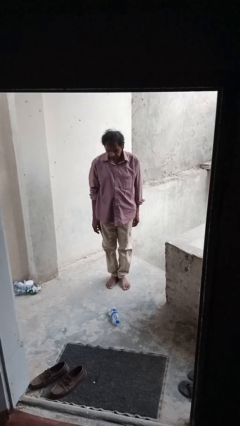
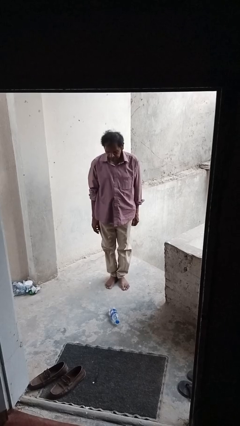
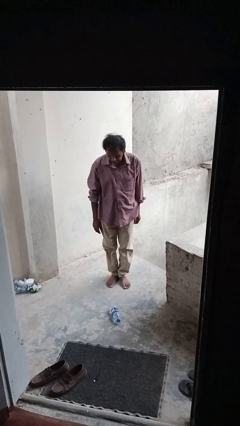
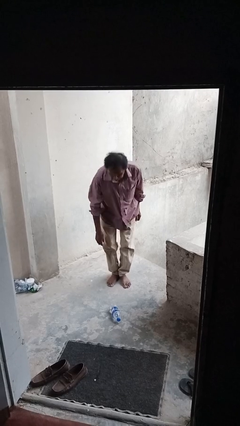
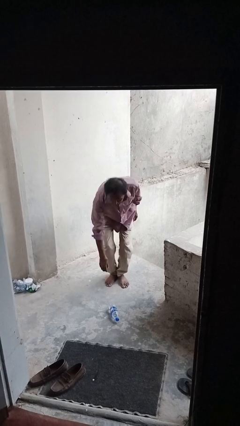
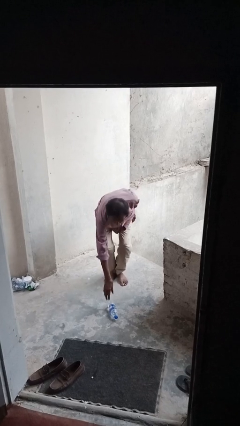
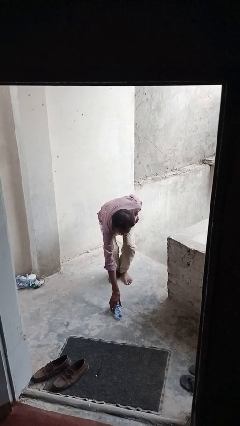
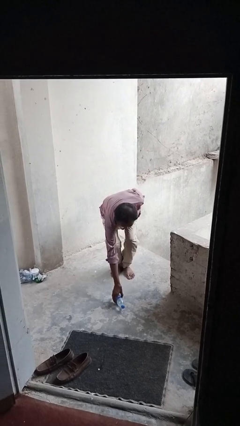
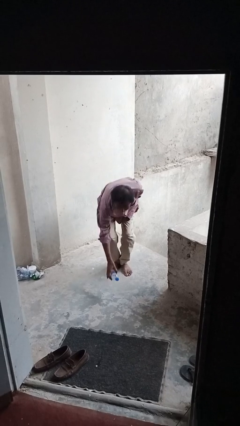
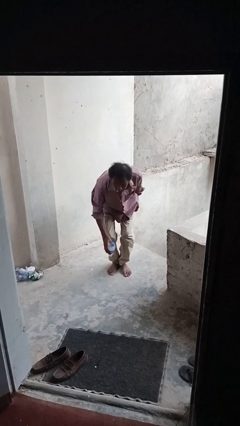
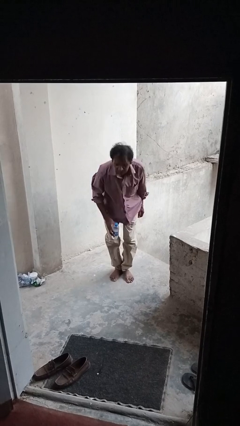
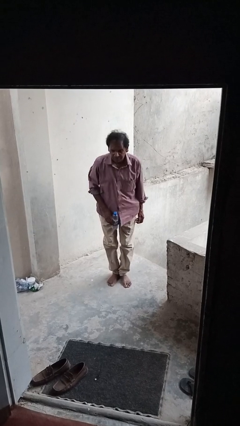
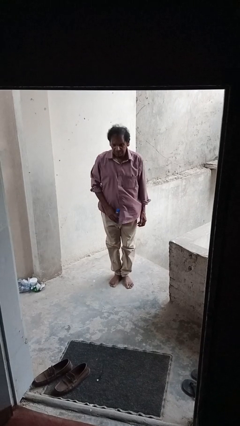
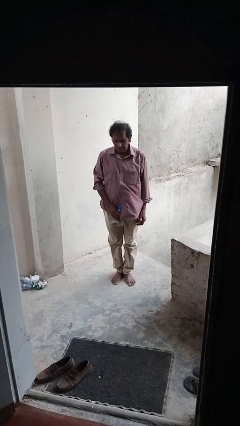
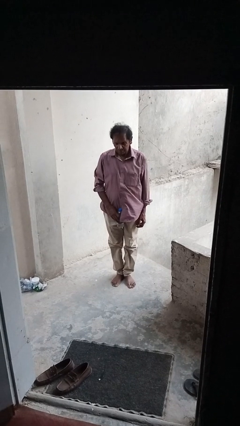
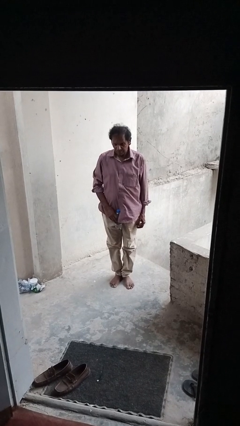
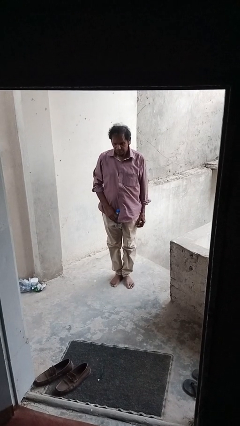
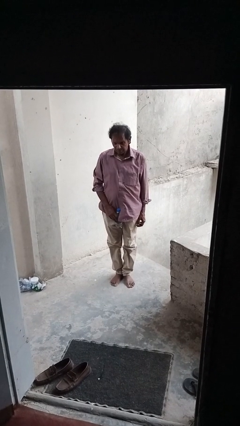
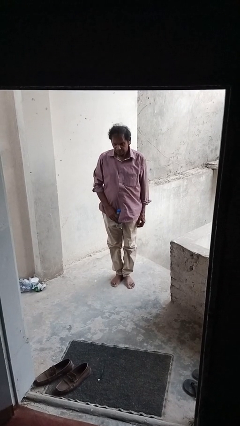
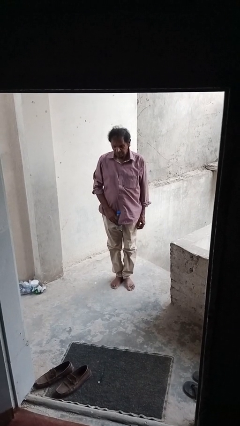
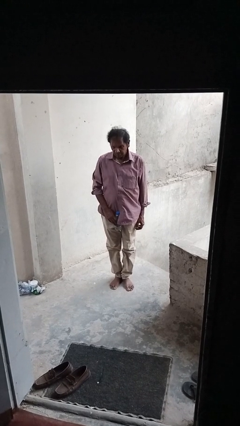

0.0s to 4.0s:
person picks up object from floor

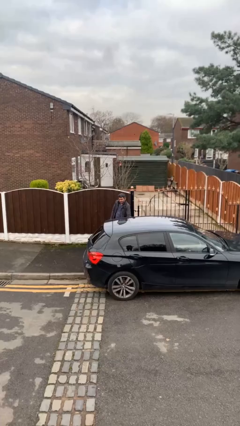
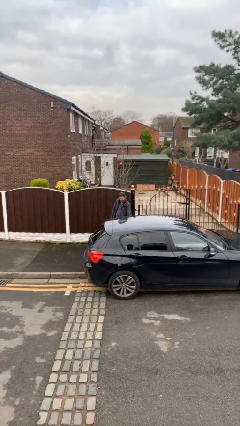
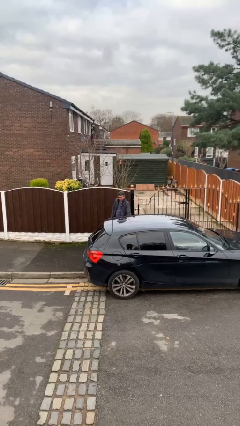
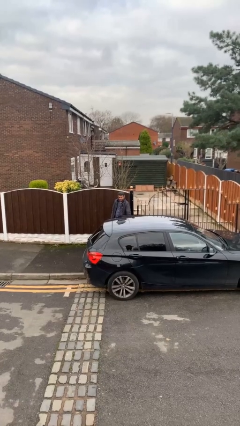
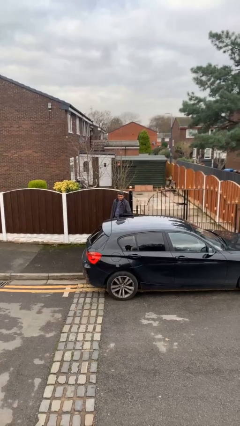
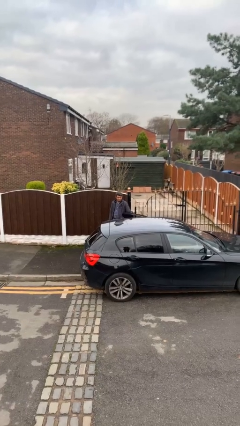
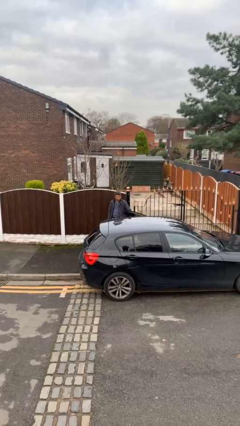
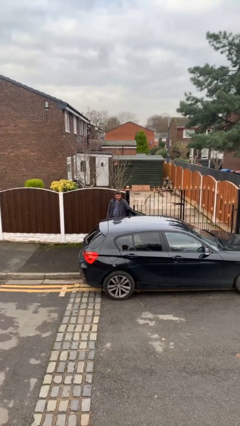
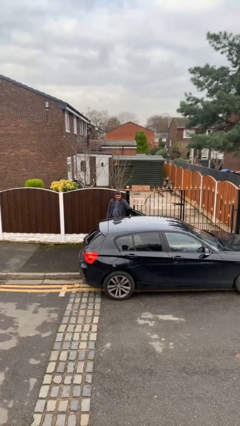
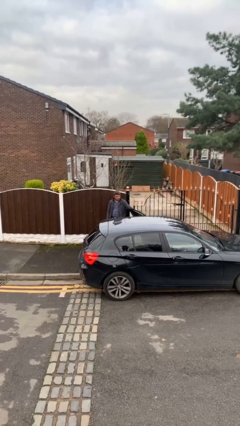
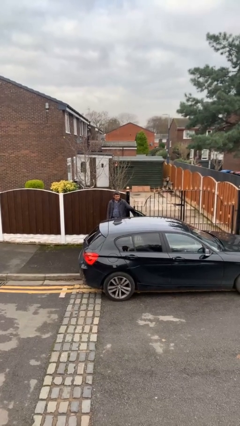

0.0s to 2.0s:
person opens car door

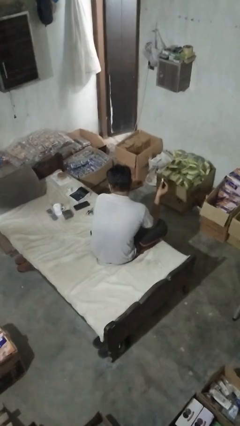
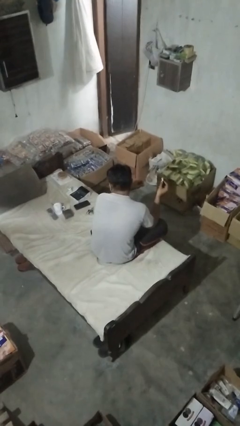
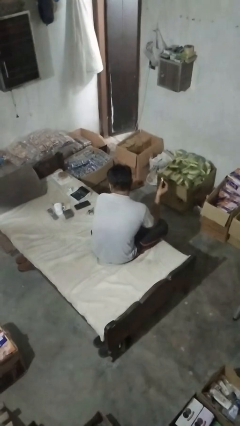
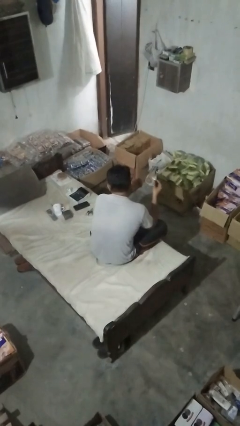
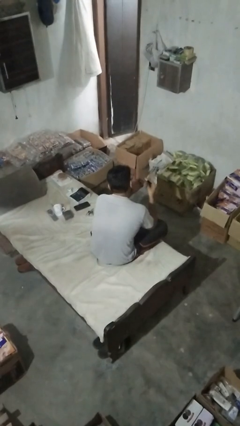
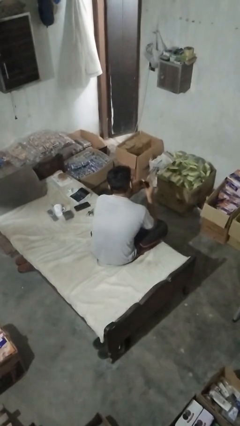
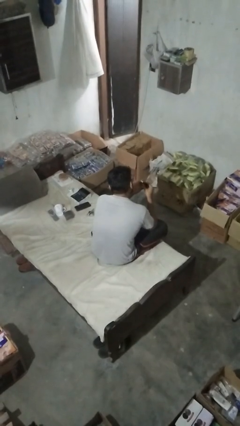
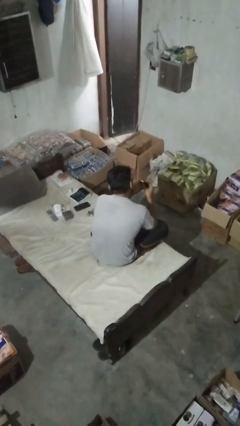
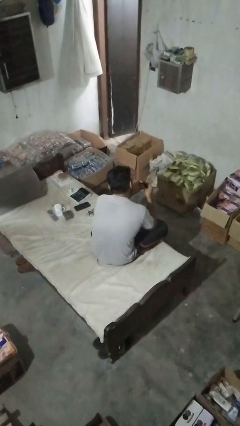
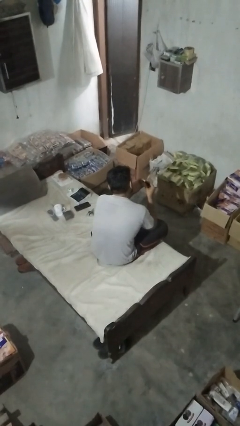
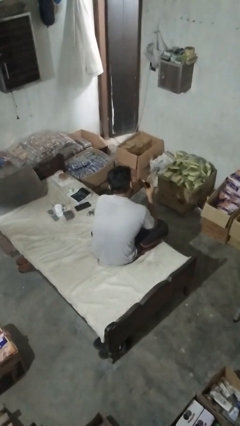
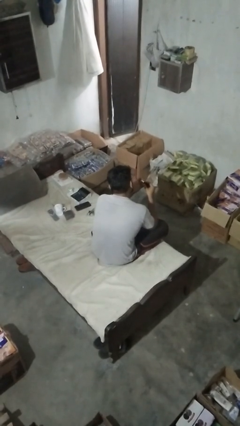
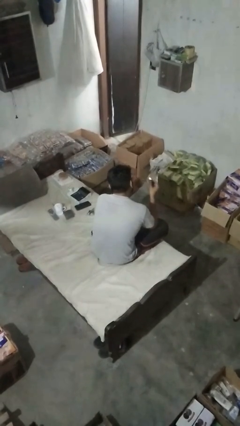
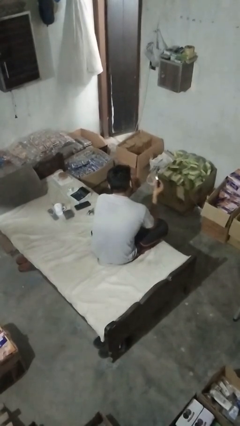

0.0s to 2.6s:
person paints fingernails

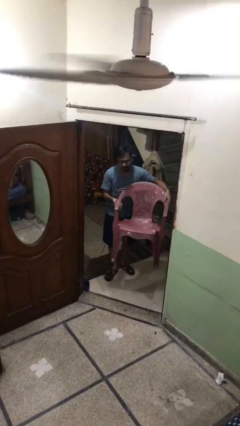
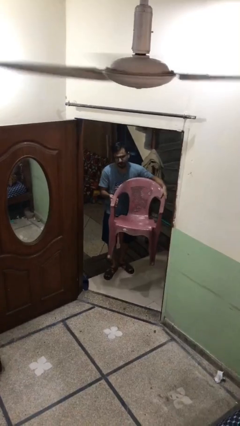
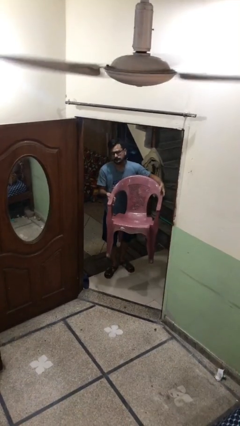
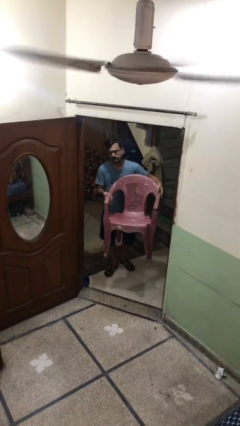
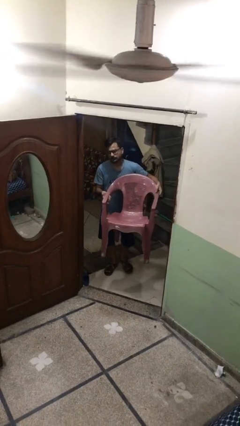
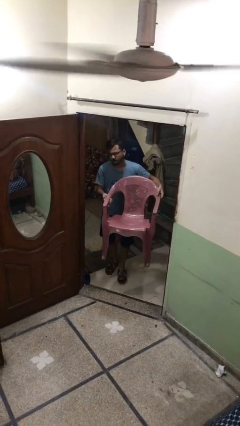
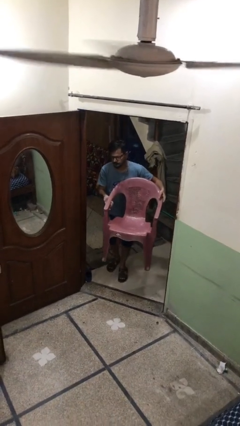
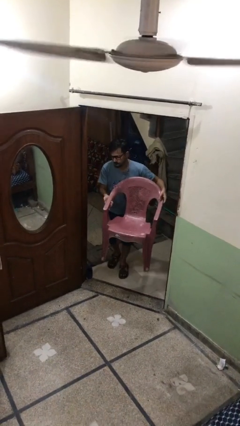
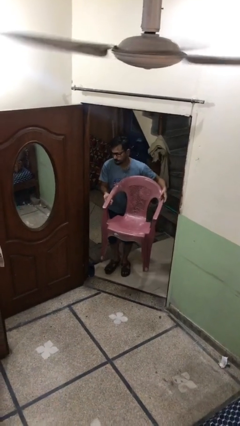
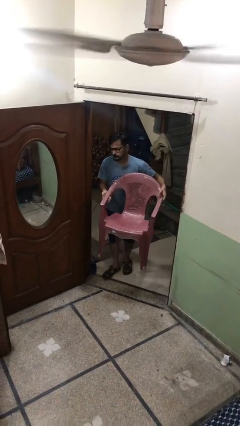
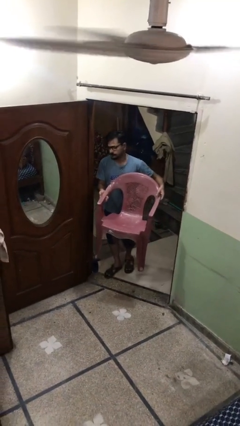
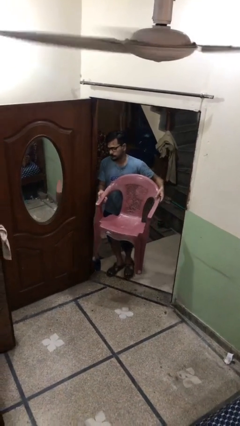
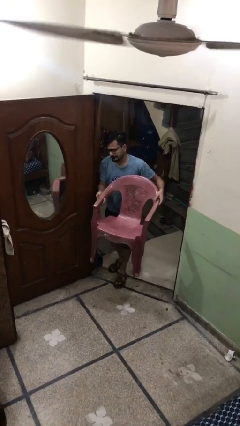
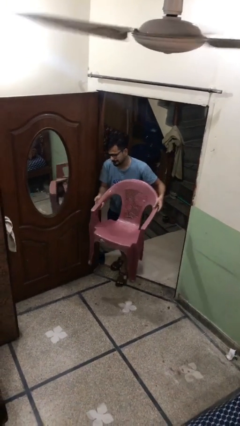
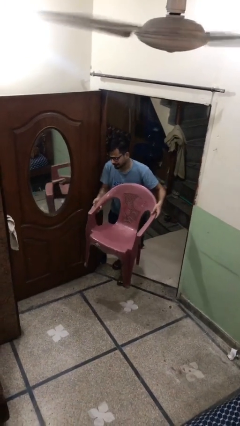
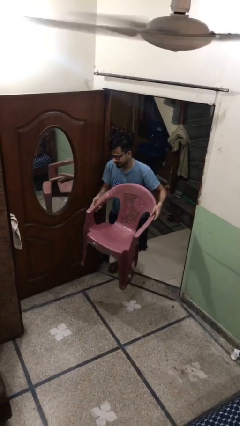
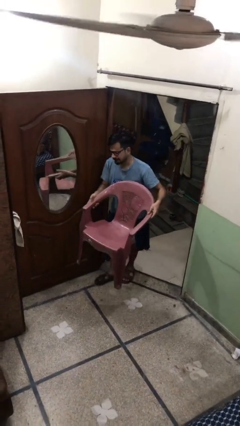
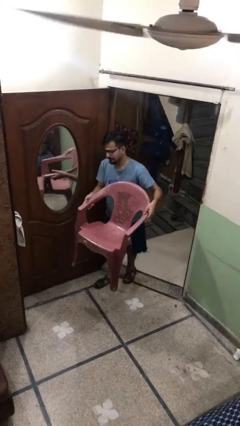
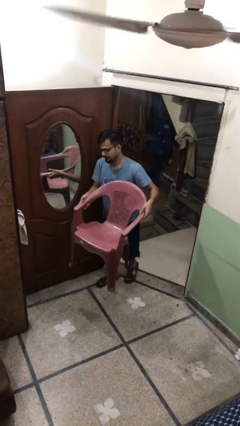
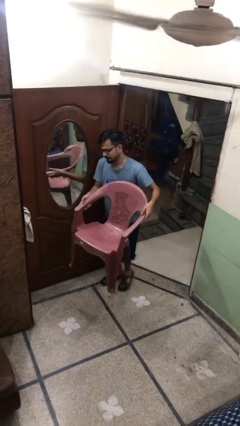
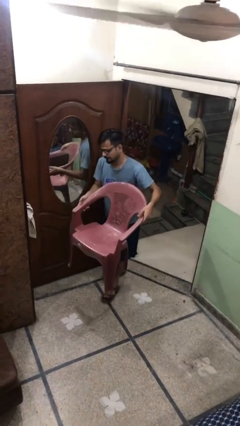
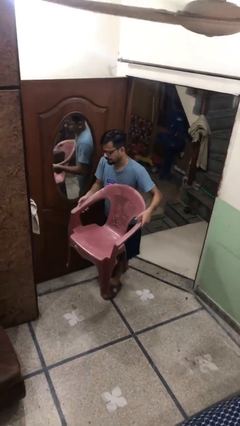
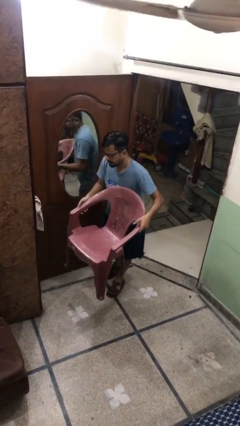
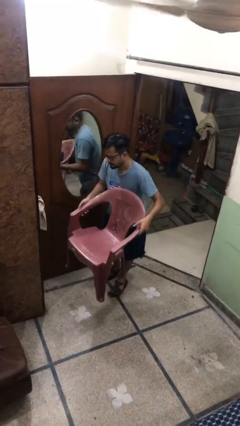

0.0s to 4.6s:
person carries heavy object

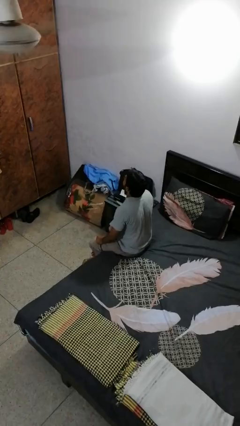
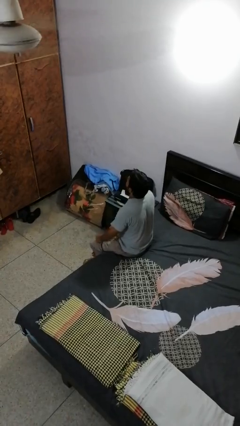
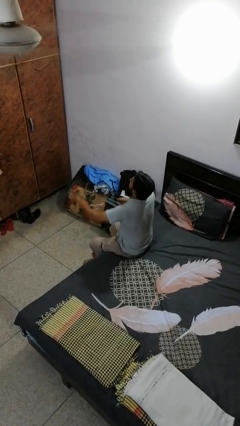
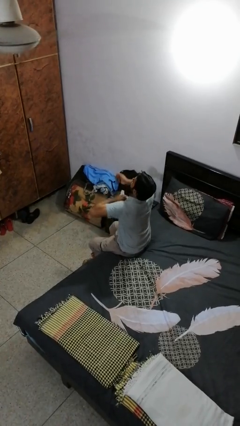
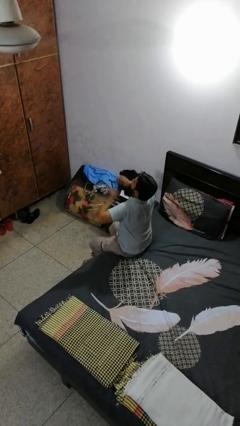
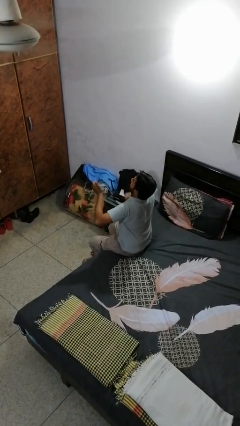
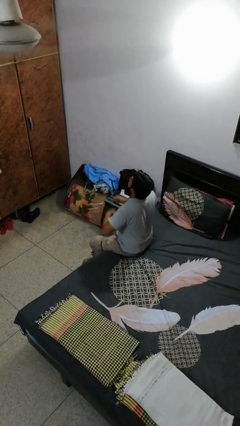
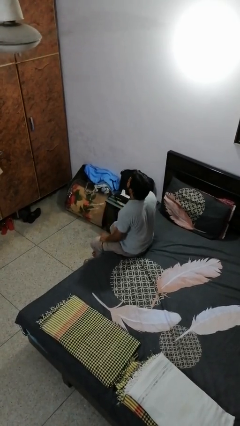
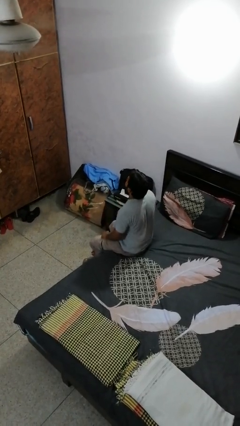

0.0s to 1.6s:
person drums on chest

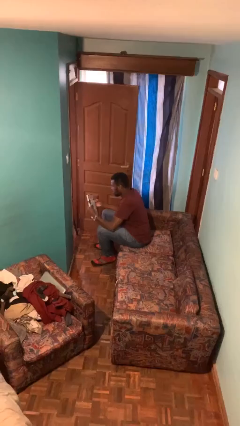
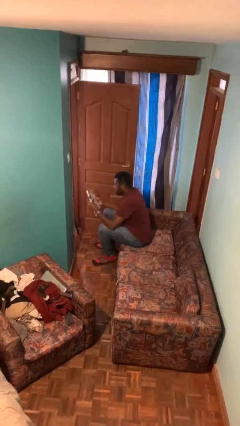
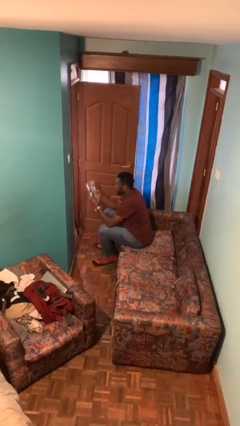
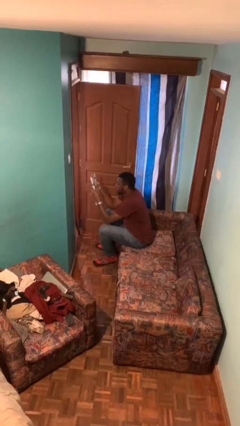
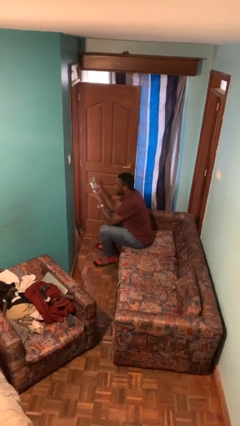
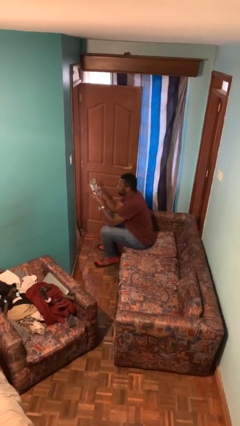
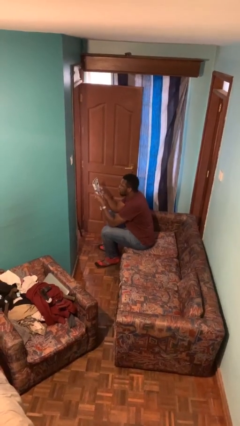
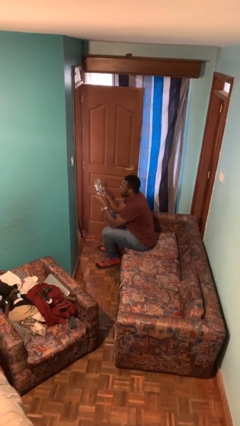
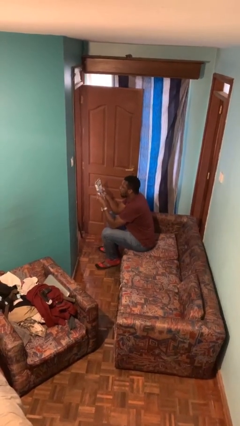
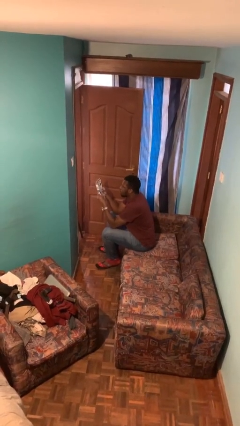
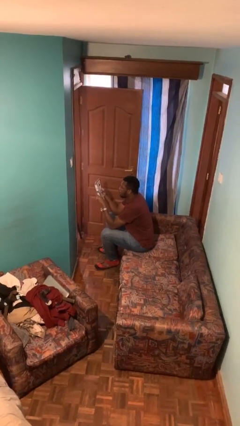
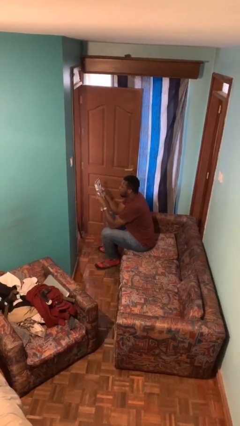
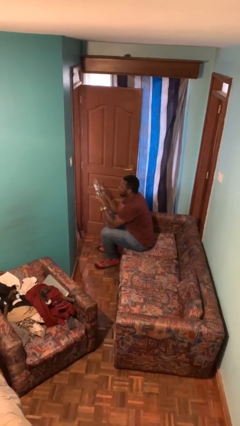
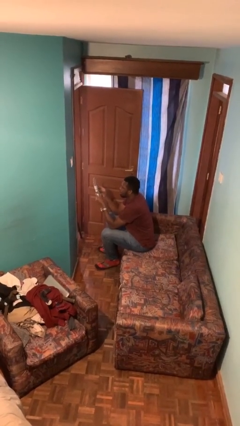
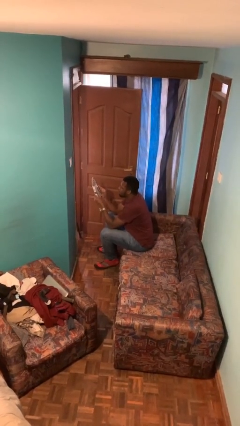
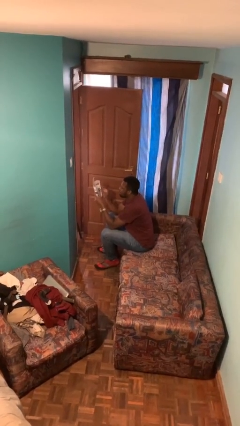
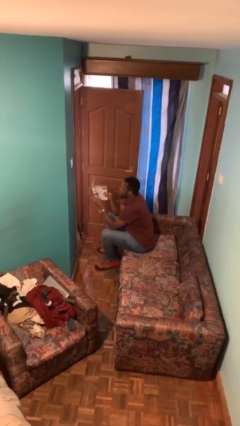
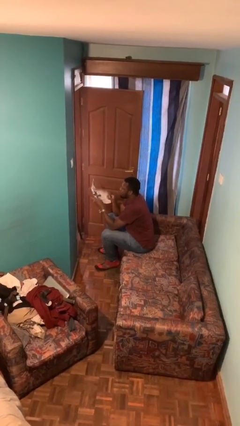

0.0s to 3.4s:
person reads document
